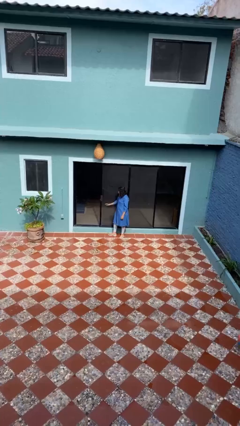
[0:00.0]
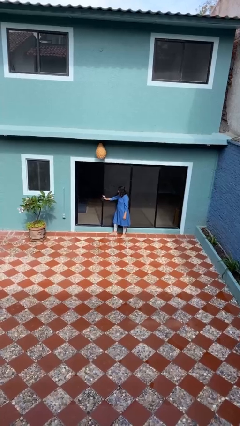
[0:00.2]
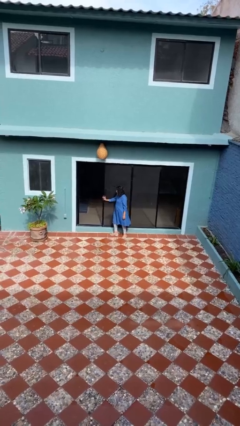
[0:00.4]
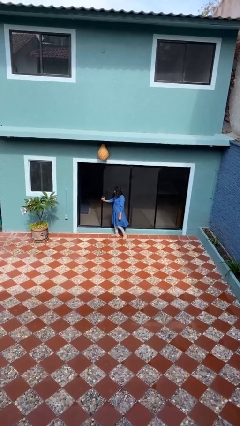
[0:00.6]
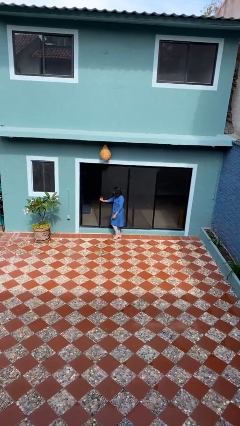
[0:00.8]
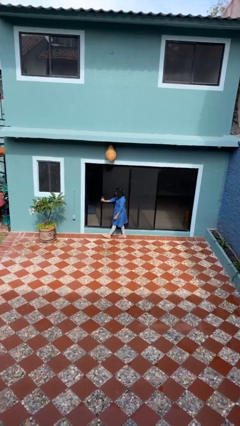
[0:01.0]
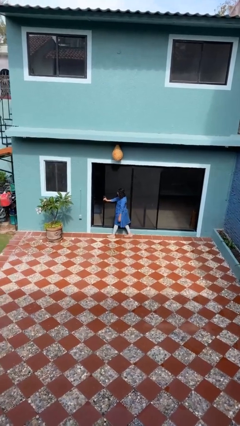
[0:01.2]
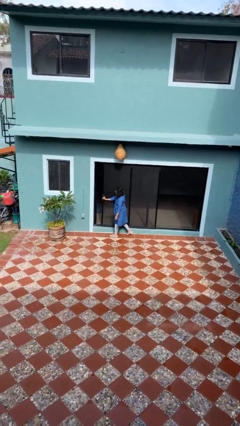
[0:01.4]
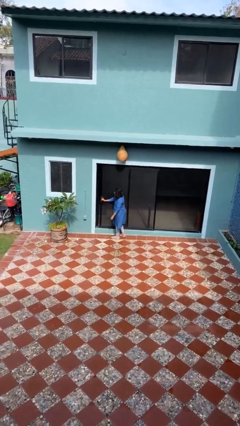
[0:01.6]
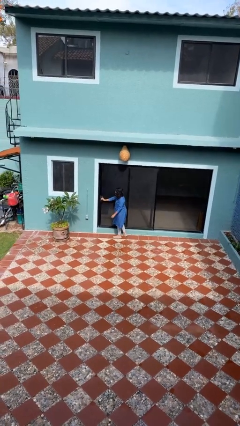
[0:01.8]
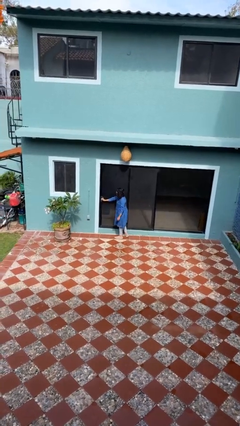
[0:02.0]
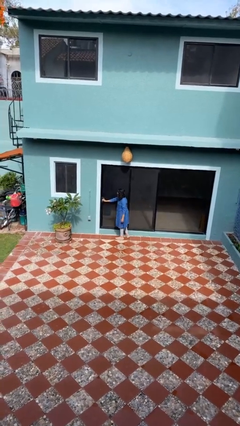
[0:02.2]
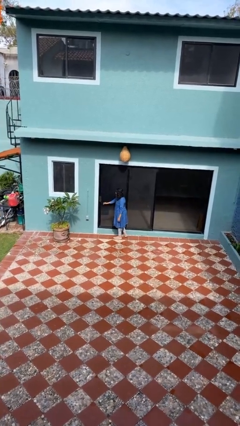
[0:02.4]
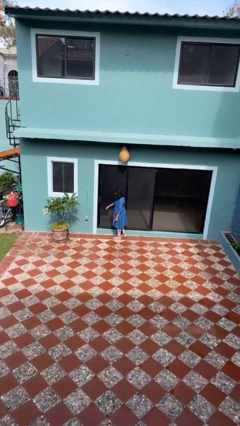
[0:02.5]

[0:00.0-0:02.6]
person closes sliding door

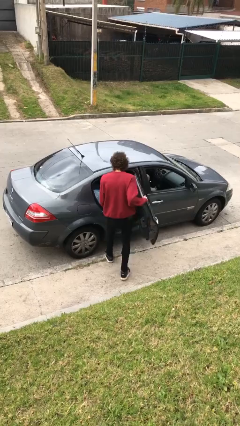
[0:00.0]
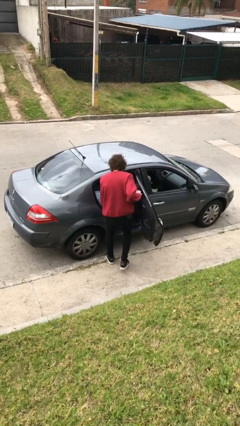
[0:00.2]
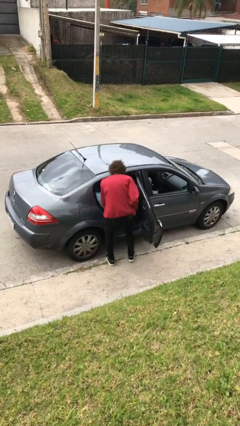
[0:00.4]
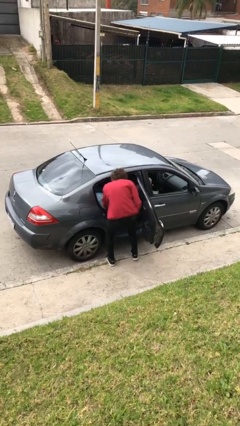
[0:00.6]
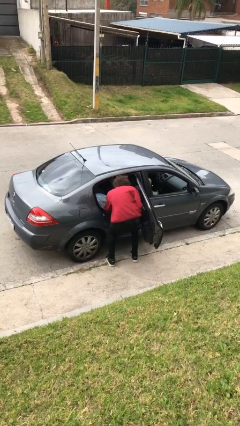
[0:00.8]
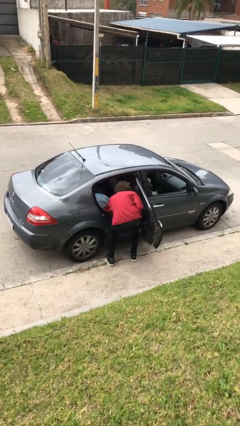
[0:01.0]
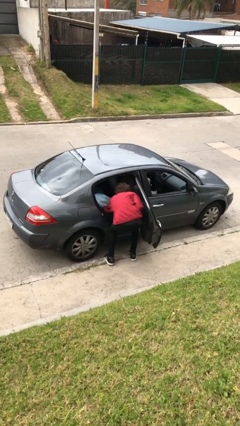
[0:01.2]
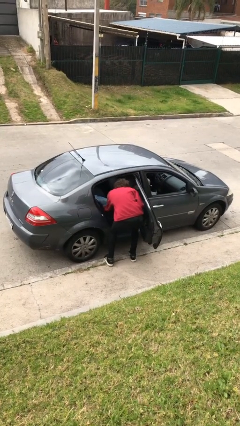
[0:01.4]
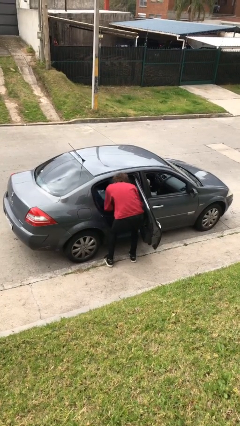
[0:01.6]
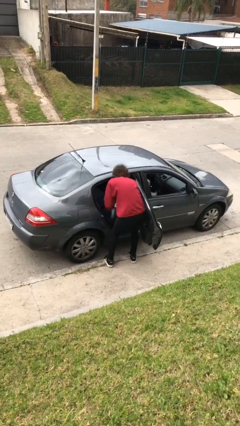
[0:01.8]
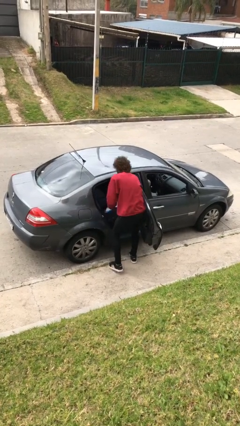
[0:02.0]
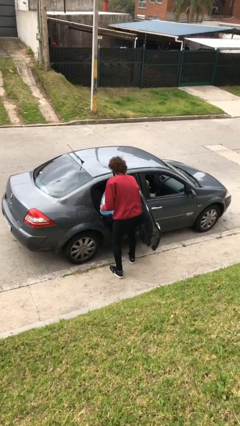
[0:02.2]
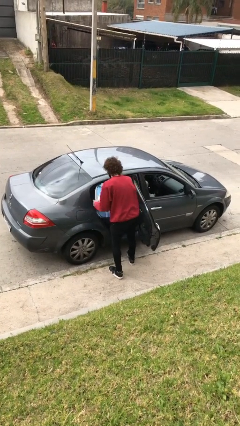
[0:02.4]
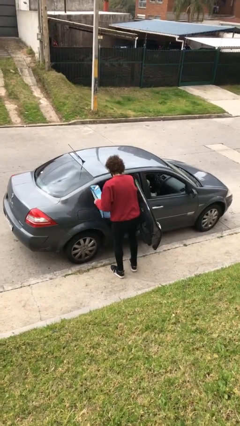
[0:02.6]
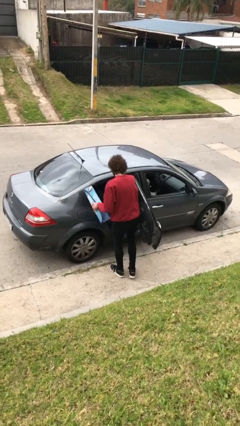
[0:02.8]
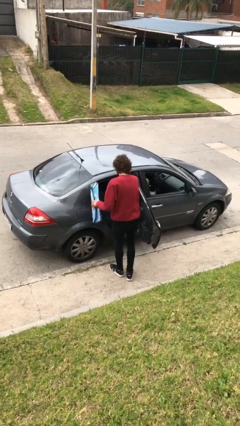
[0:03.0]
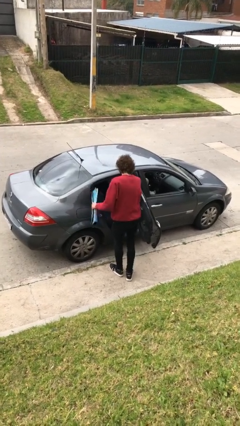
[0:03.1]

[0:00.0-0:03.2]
person unloads car

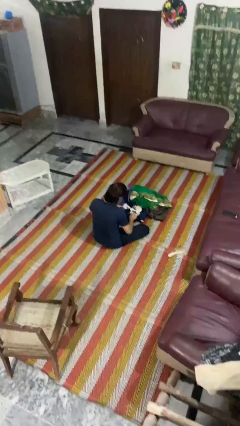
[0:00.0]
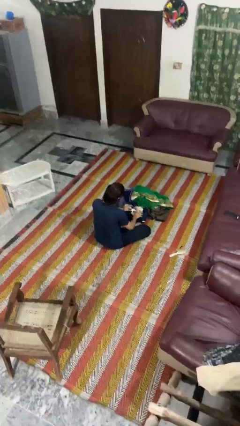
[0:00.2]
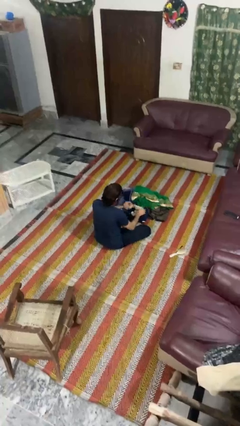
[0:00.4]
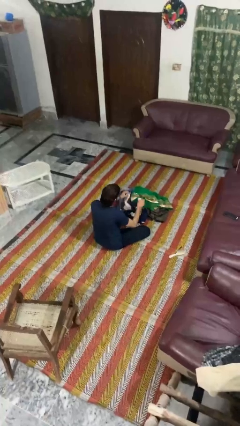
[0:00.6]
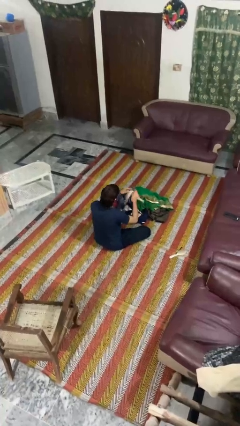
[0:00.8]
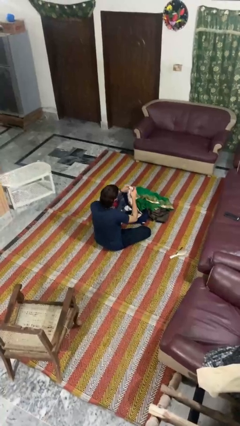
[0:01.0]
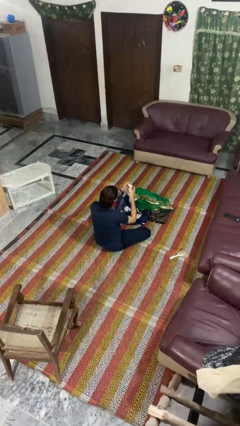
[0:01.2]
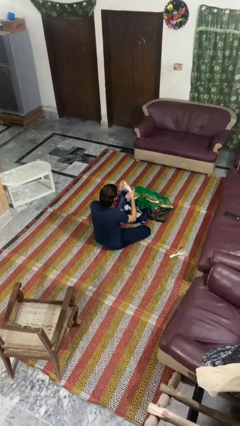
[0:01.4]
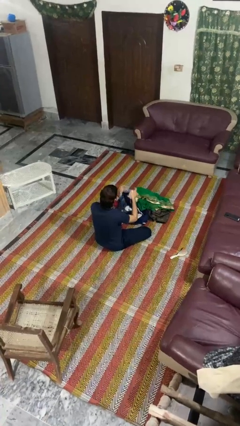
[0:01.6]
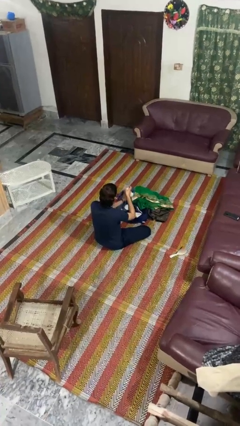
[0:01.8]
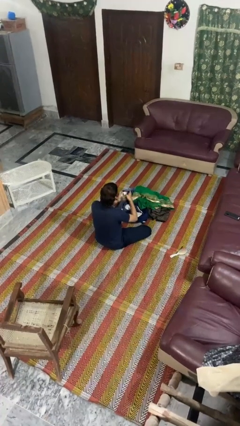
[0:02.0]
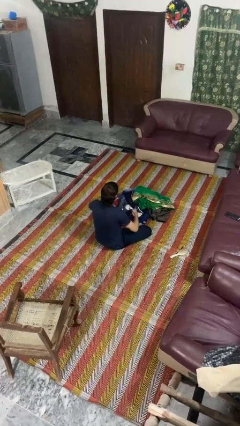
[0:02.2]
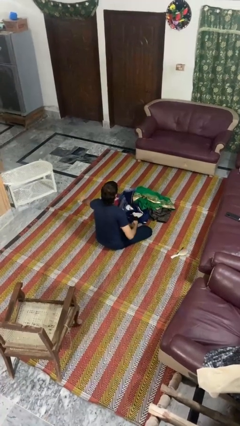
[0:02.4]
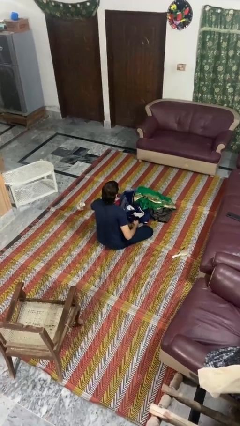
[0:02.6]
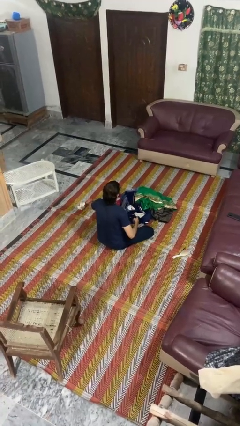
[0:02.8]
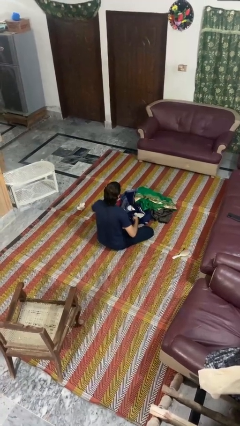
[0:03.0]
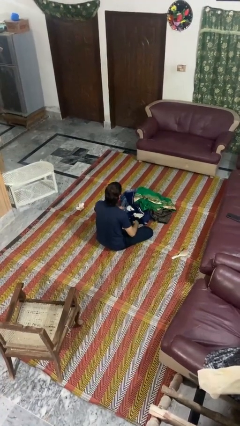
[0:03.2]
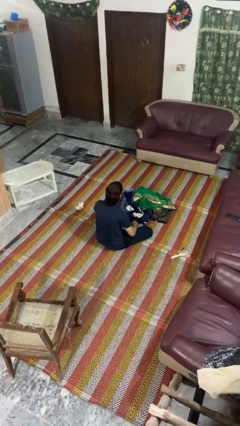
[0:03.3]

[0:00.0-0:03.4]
person folds socks

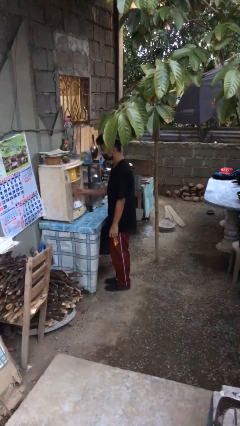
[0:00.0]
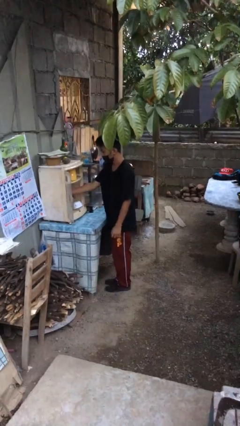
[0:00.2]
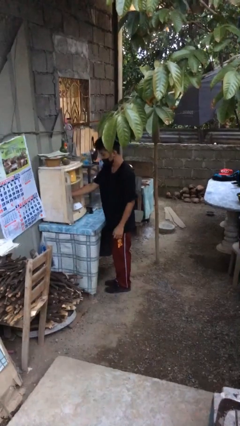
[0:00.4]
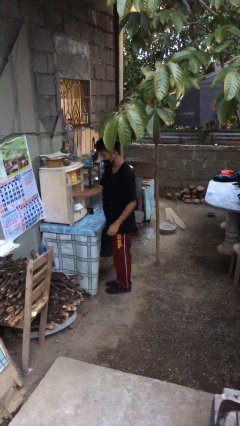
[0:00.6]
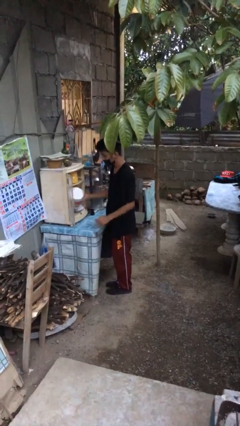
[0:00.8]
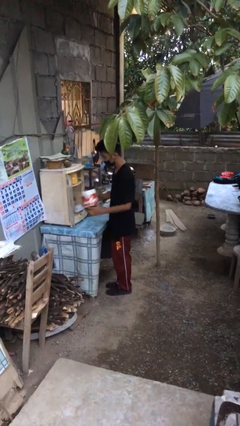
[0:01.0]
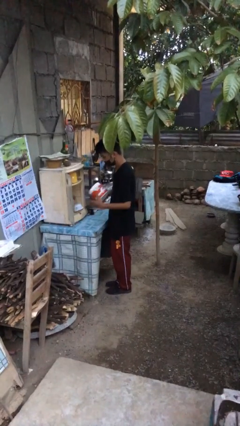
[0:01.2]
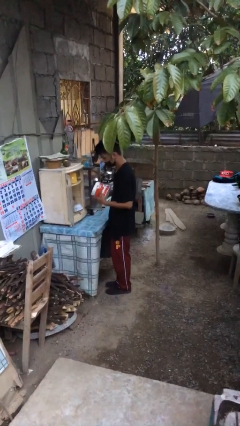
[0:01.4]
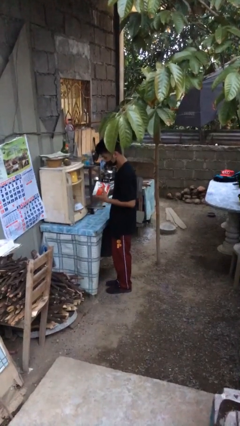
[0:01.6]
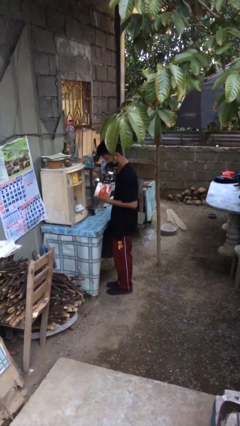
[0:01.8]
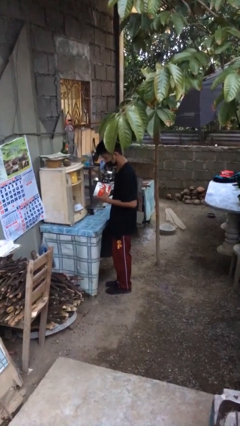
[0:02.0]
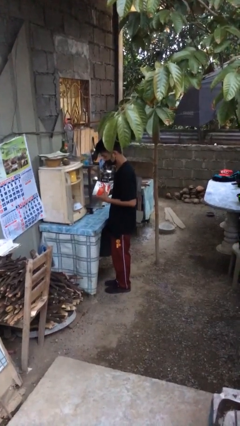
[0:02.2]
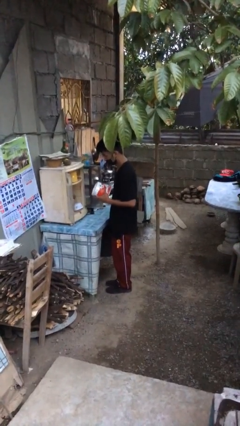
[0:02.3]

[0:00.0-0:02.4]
person picks up object from cabinet

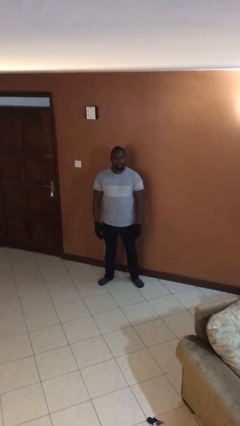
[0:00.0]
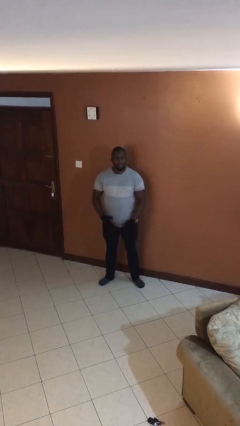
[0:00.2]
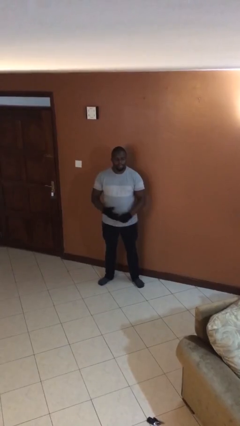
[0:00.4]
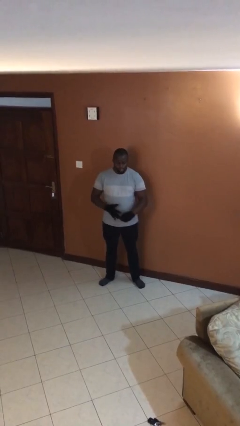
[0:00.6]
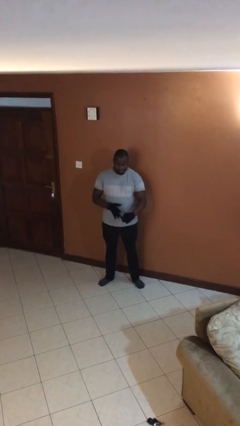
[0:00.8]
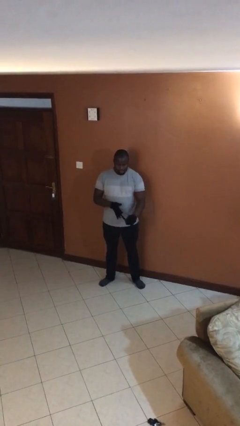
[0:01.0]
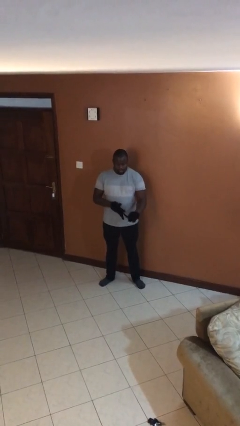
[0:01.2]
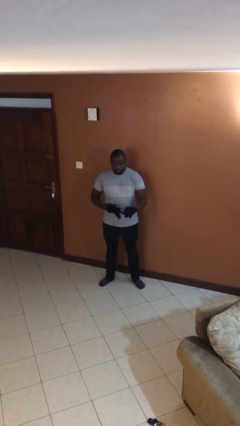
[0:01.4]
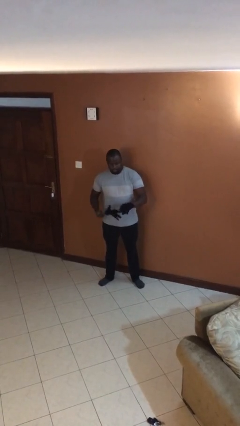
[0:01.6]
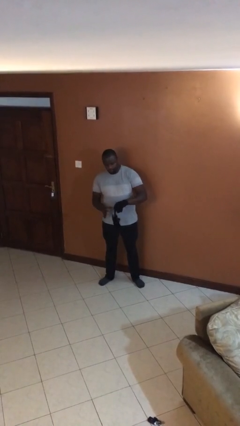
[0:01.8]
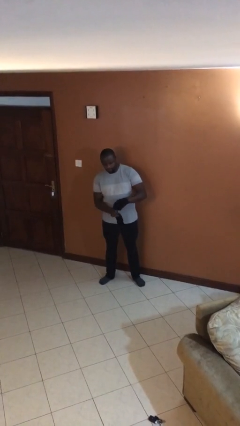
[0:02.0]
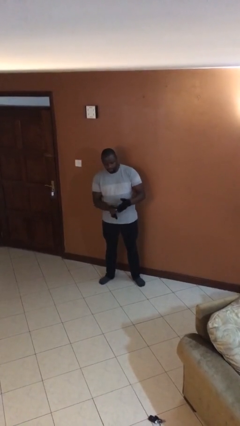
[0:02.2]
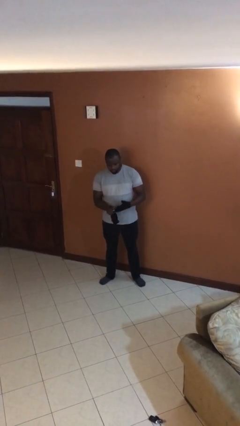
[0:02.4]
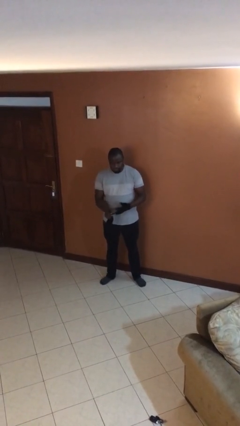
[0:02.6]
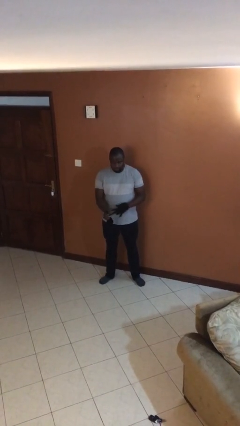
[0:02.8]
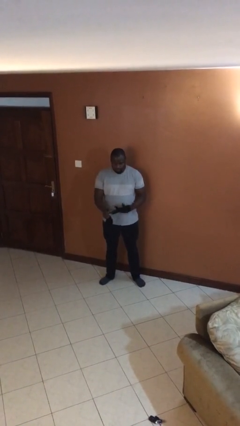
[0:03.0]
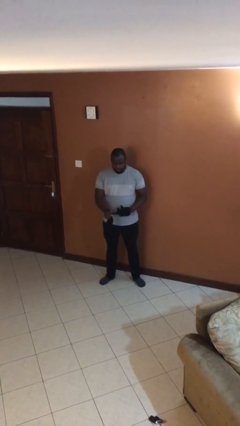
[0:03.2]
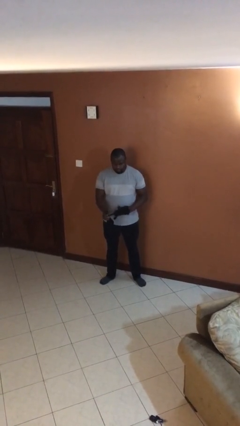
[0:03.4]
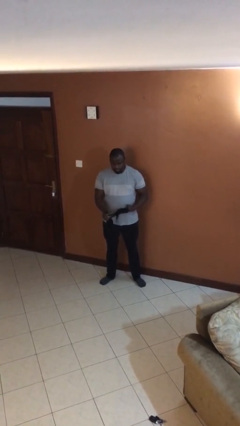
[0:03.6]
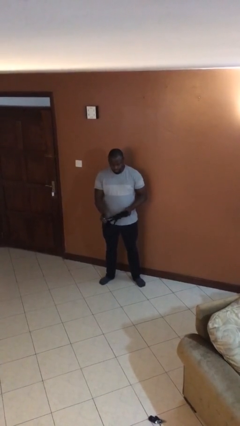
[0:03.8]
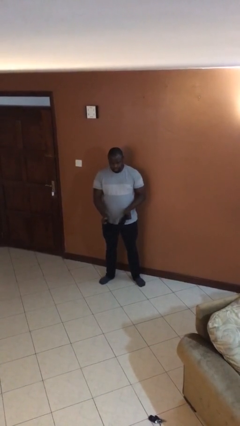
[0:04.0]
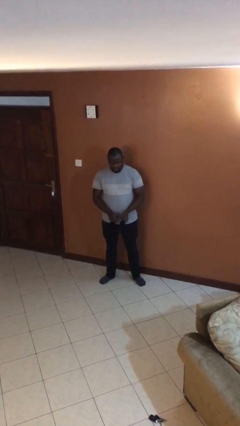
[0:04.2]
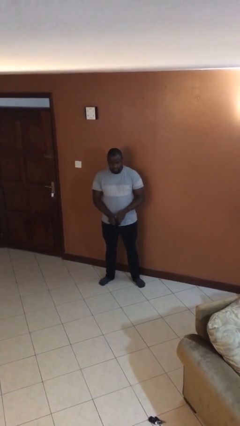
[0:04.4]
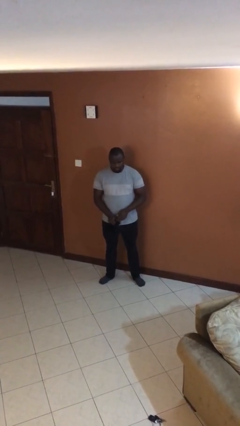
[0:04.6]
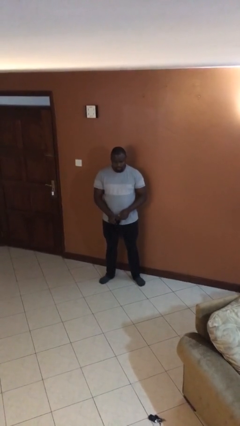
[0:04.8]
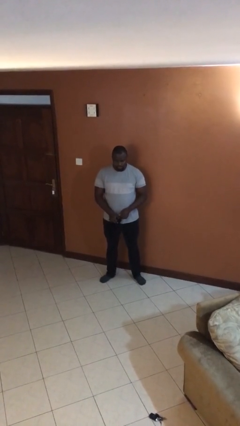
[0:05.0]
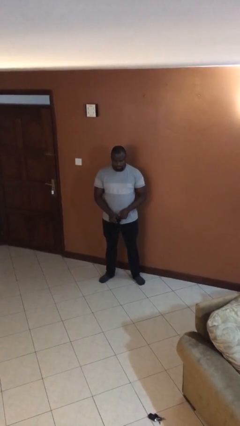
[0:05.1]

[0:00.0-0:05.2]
person takes off gloves

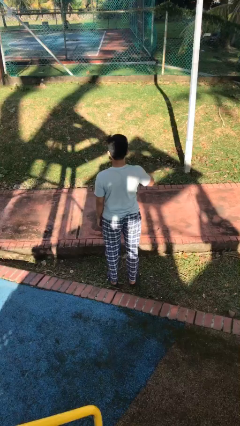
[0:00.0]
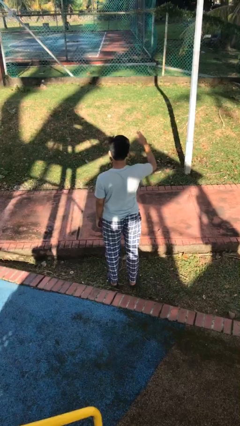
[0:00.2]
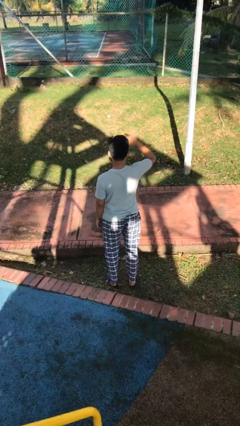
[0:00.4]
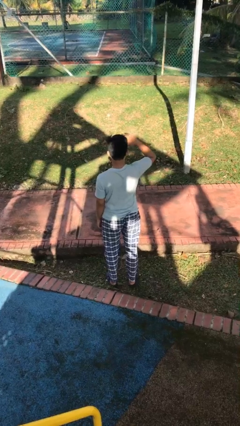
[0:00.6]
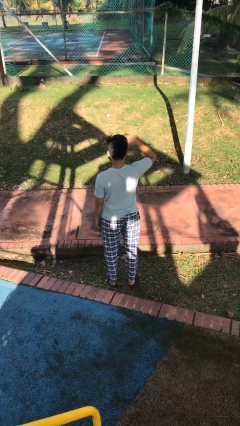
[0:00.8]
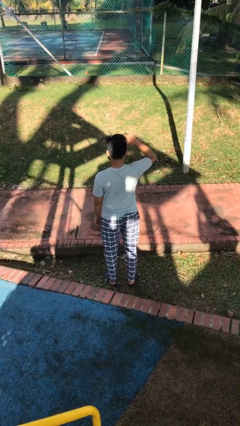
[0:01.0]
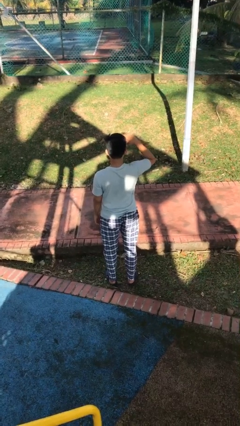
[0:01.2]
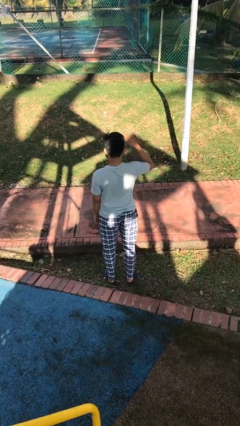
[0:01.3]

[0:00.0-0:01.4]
person salutes
